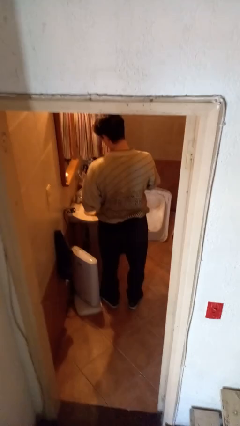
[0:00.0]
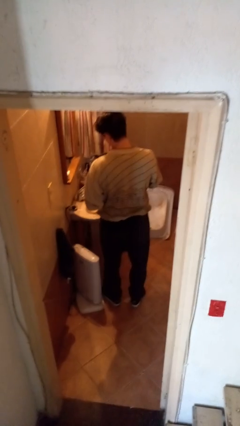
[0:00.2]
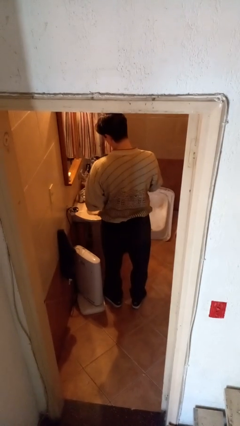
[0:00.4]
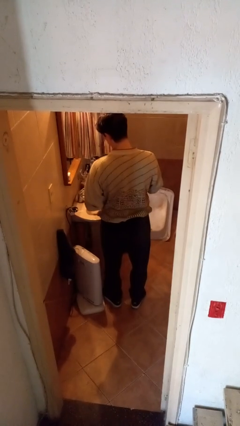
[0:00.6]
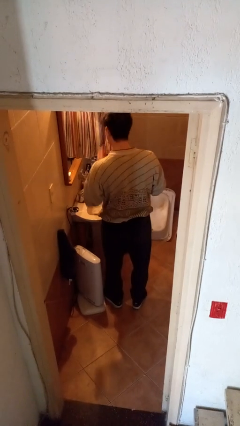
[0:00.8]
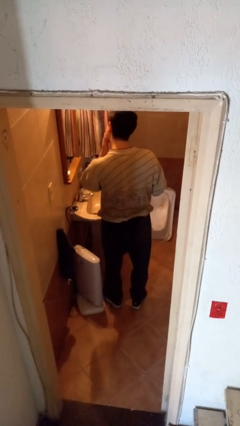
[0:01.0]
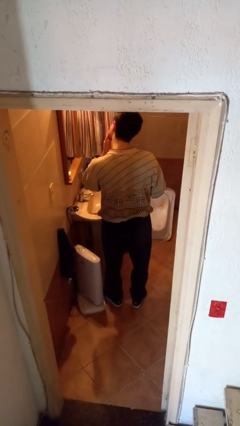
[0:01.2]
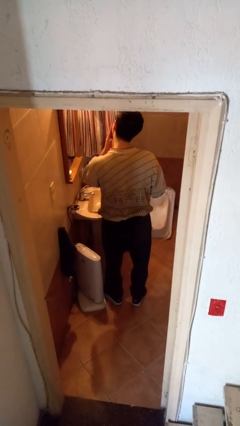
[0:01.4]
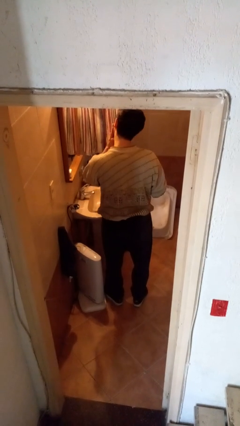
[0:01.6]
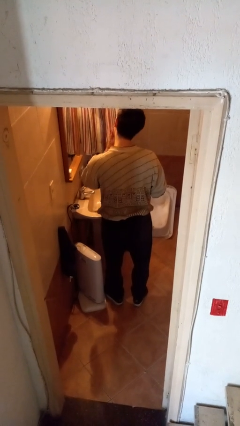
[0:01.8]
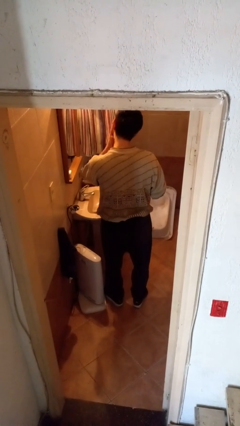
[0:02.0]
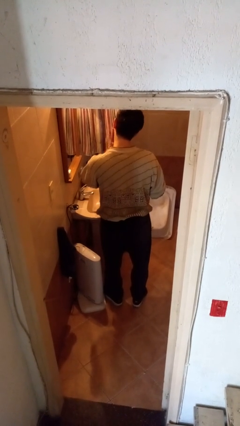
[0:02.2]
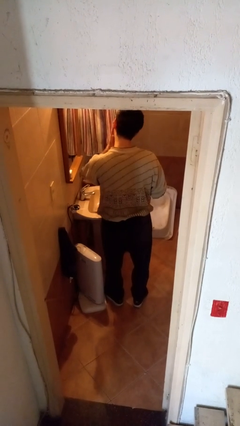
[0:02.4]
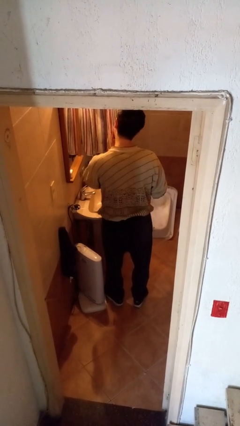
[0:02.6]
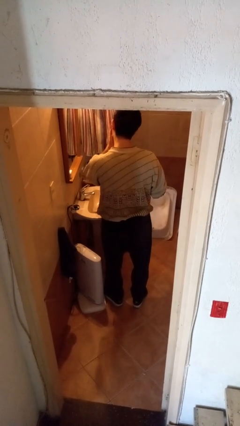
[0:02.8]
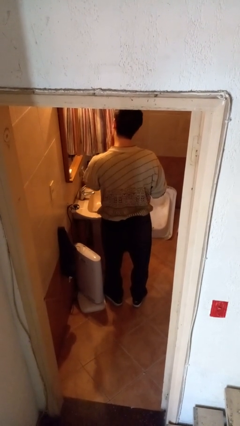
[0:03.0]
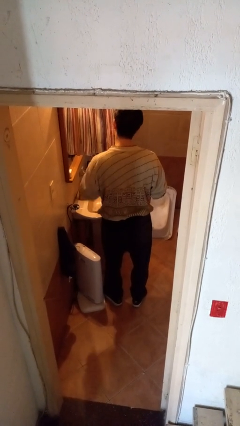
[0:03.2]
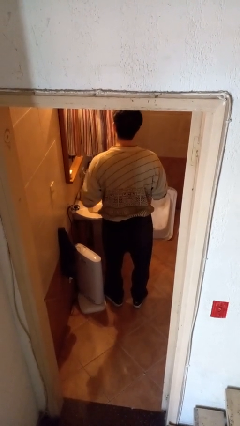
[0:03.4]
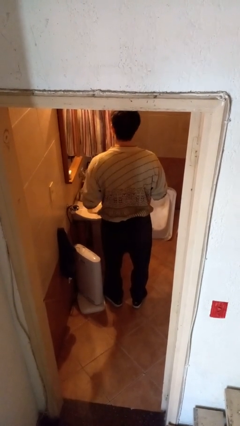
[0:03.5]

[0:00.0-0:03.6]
person applies facial moisturizer

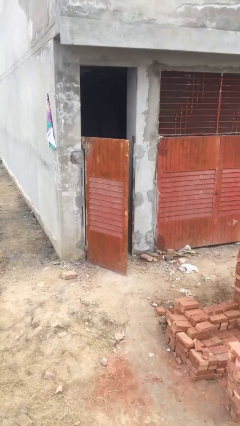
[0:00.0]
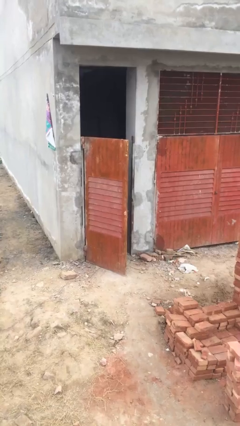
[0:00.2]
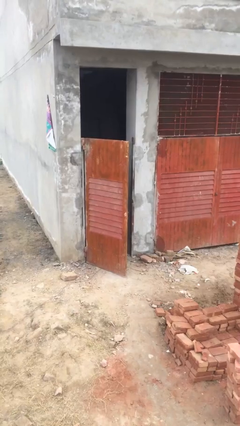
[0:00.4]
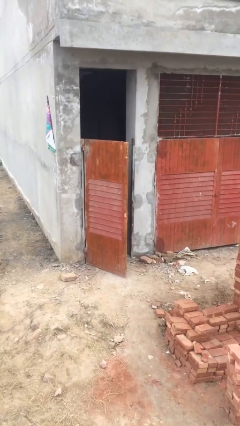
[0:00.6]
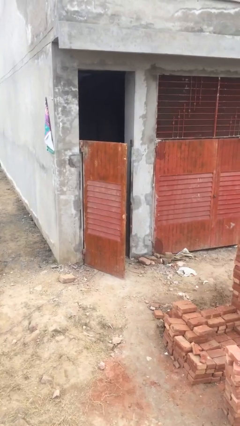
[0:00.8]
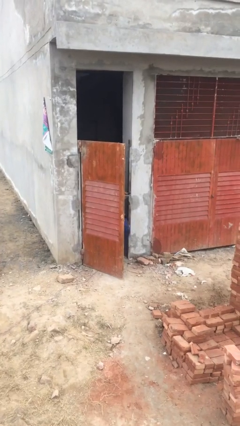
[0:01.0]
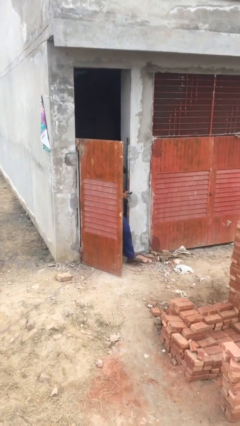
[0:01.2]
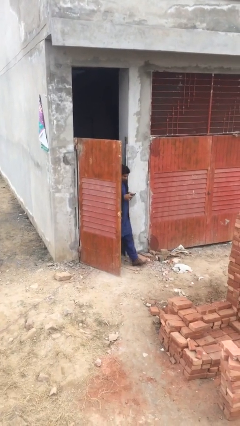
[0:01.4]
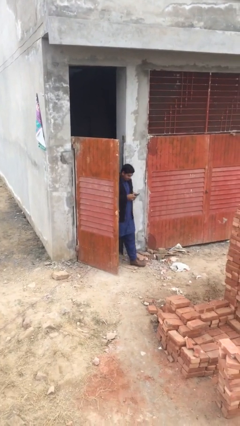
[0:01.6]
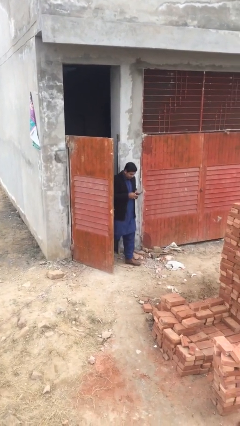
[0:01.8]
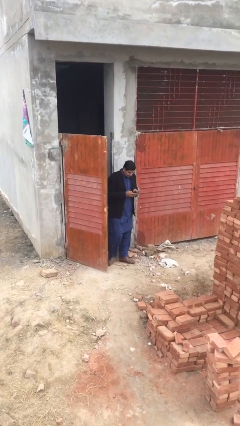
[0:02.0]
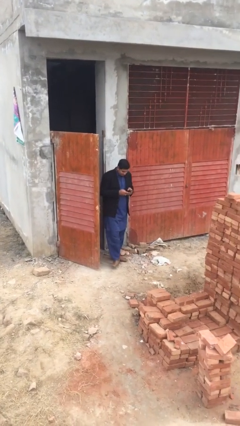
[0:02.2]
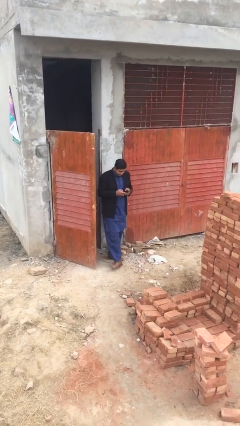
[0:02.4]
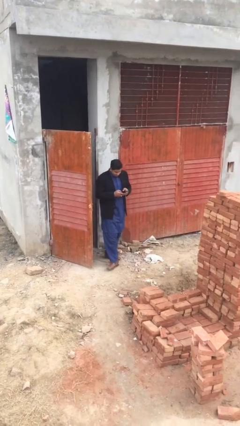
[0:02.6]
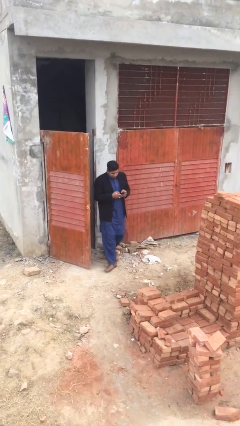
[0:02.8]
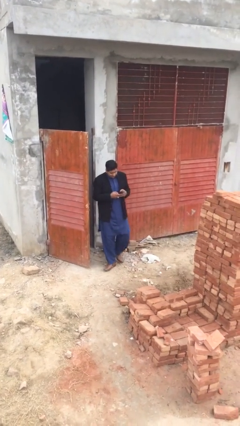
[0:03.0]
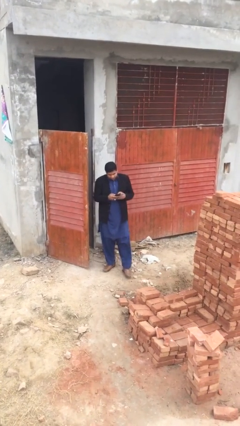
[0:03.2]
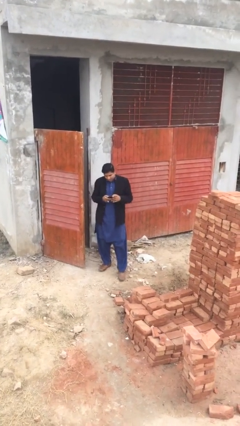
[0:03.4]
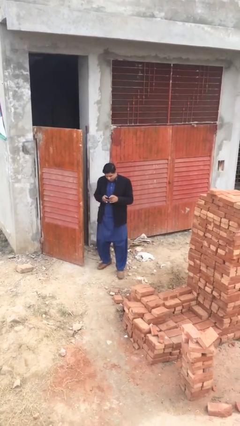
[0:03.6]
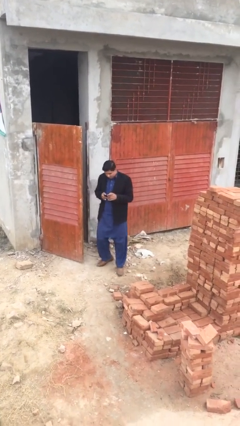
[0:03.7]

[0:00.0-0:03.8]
person enters scene through structure

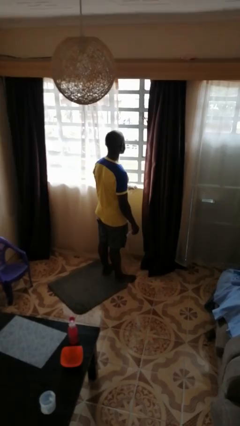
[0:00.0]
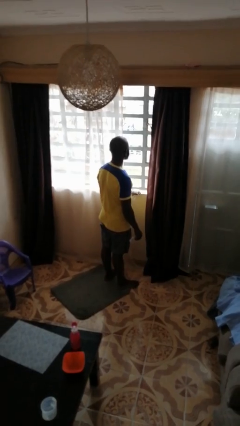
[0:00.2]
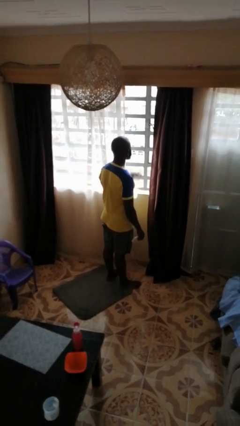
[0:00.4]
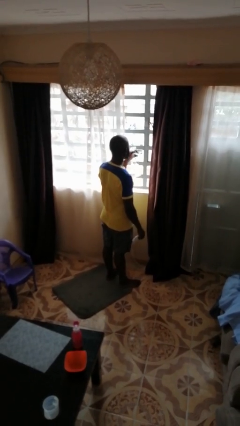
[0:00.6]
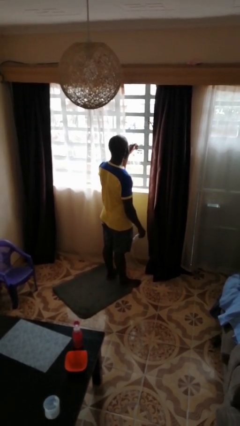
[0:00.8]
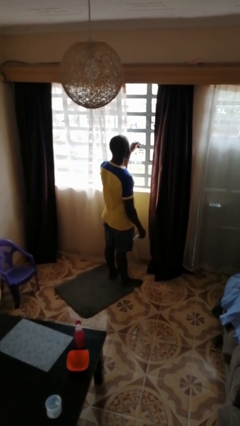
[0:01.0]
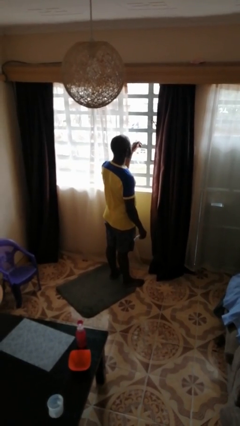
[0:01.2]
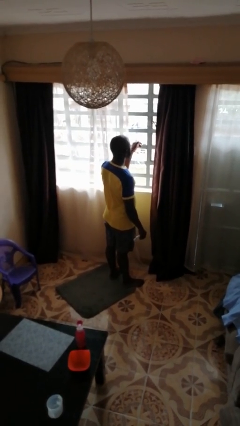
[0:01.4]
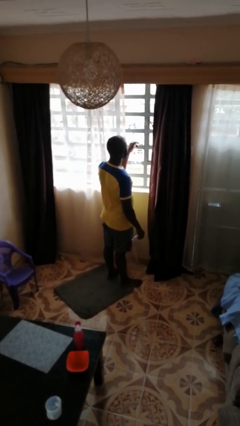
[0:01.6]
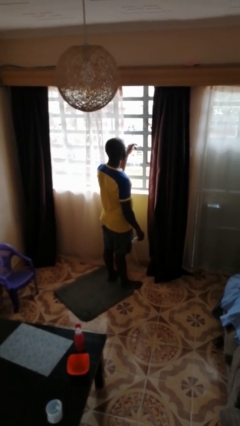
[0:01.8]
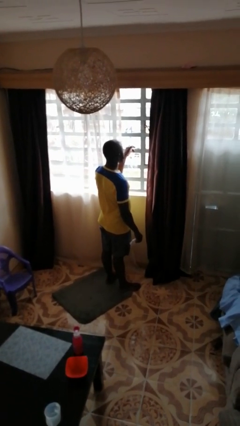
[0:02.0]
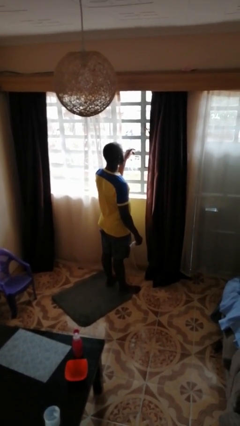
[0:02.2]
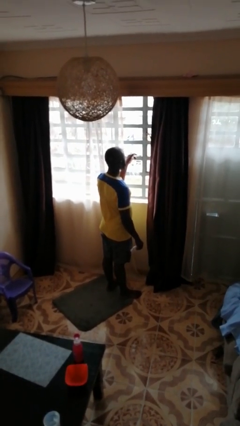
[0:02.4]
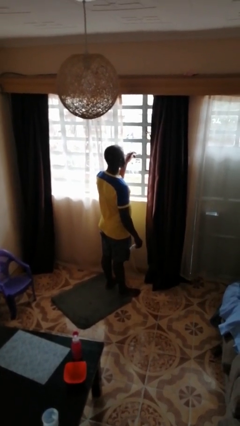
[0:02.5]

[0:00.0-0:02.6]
person sprays from bottle

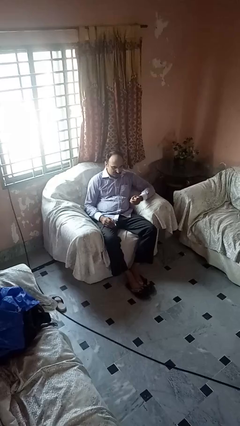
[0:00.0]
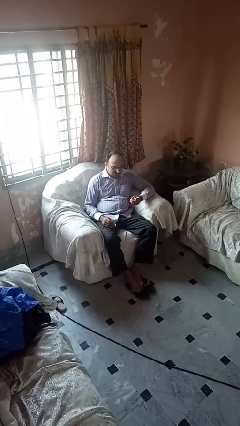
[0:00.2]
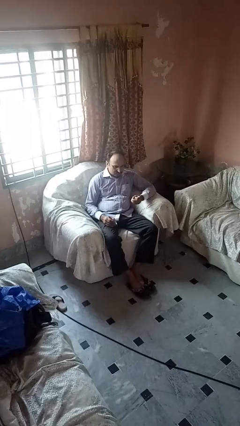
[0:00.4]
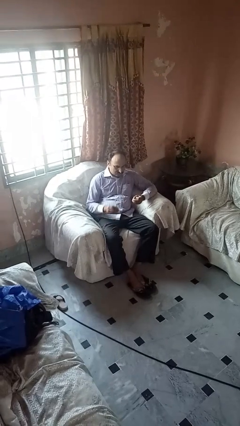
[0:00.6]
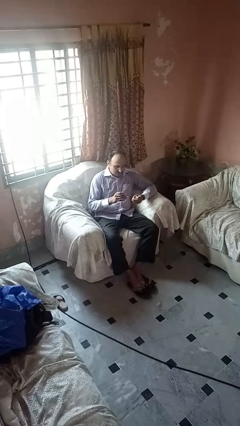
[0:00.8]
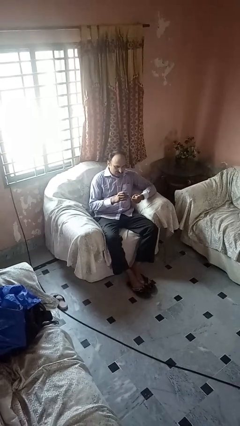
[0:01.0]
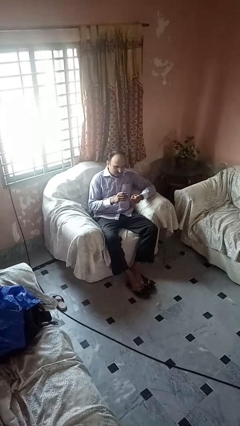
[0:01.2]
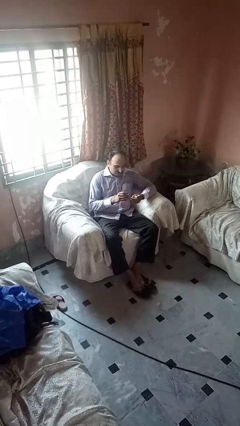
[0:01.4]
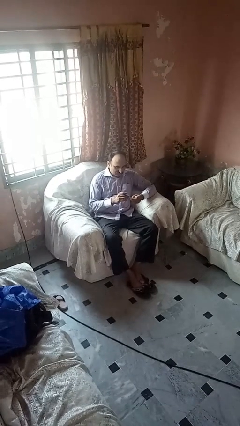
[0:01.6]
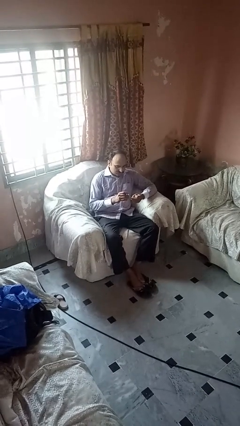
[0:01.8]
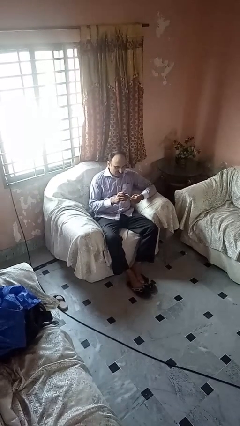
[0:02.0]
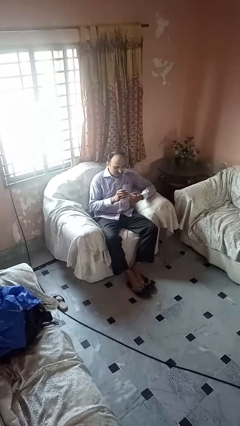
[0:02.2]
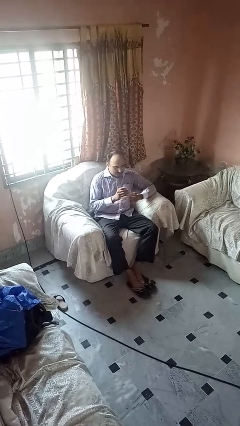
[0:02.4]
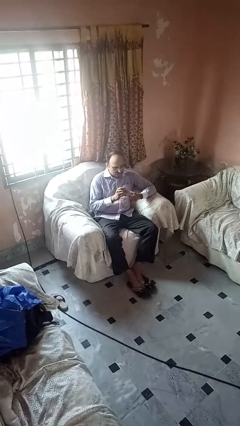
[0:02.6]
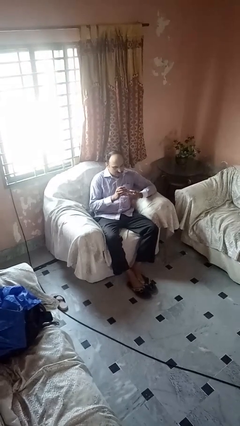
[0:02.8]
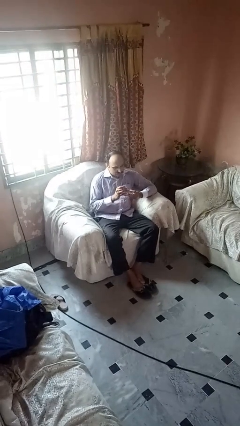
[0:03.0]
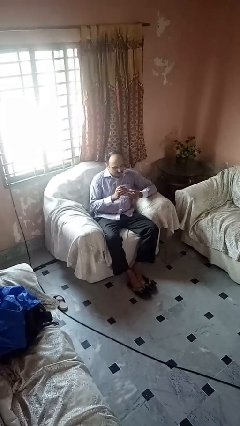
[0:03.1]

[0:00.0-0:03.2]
person clips fingernails

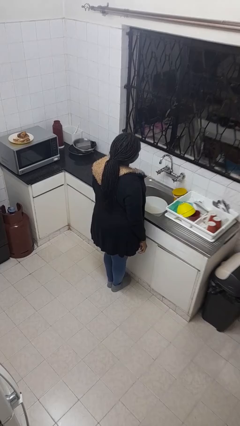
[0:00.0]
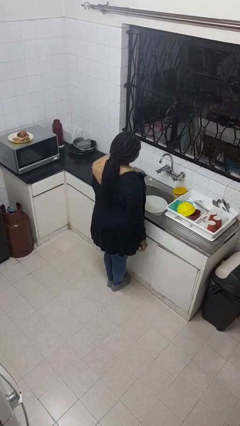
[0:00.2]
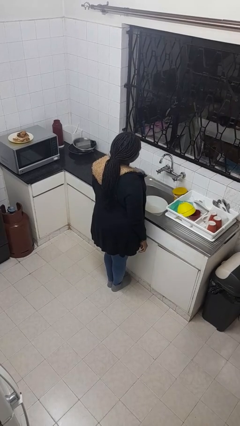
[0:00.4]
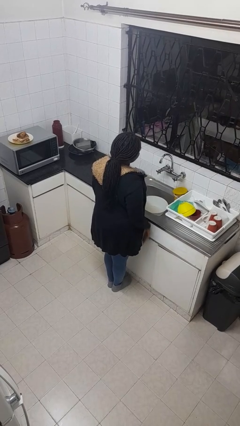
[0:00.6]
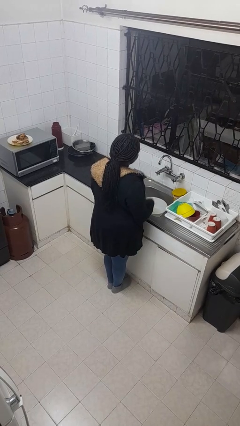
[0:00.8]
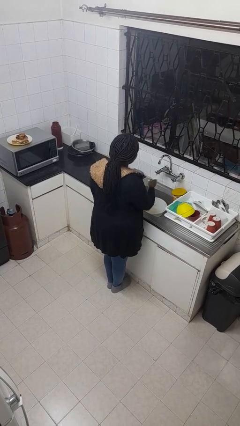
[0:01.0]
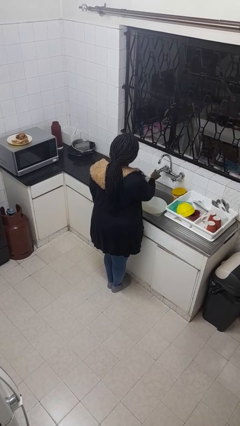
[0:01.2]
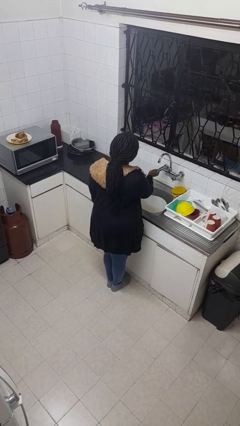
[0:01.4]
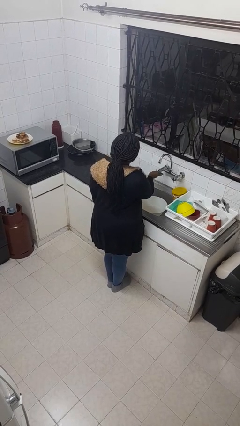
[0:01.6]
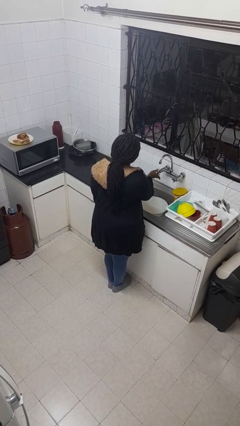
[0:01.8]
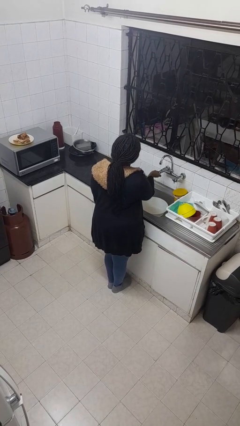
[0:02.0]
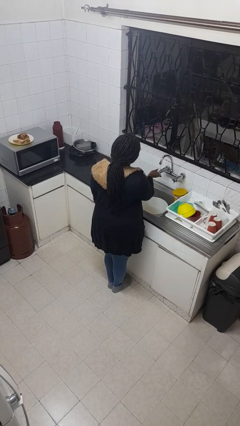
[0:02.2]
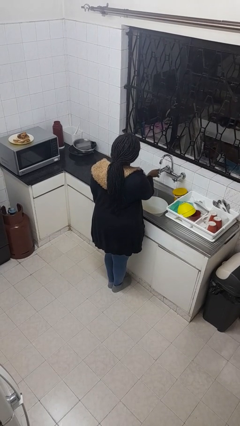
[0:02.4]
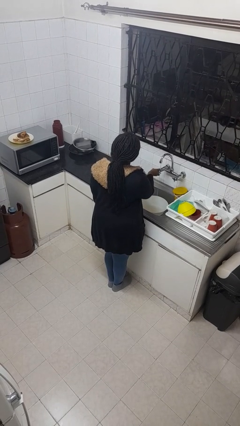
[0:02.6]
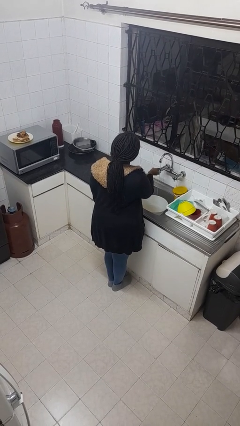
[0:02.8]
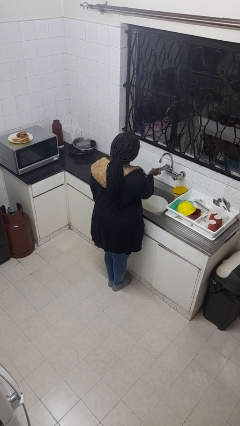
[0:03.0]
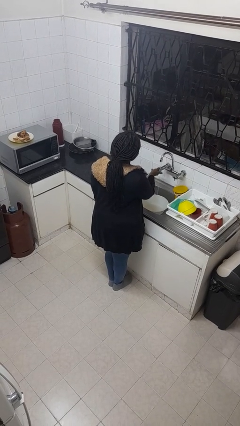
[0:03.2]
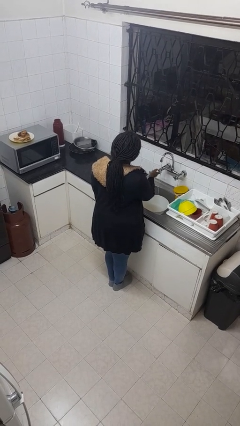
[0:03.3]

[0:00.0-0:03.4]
person turns on faucet

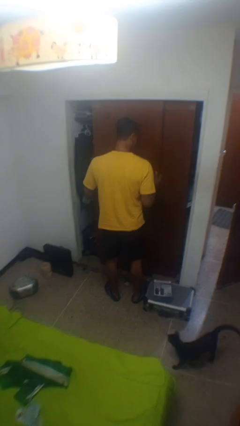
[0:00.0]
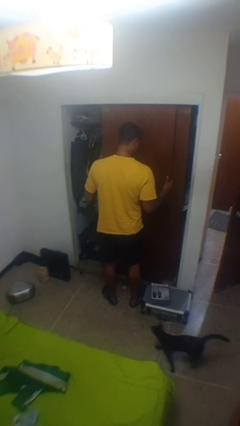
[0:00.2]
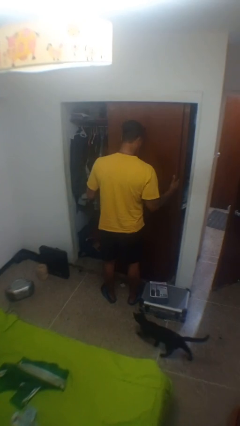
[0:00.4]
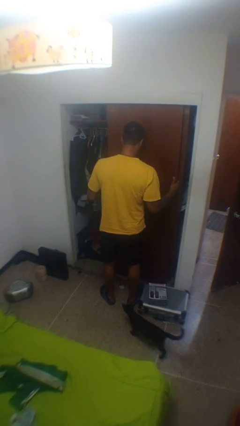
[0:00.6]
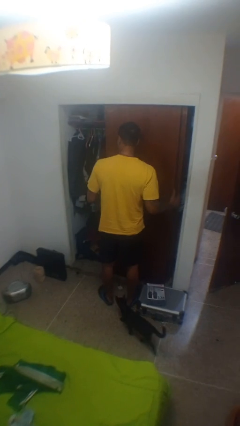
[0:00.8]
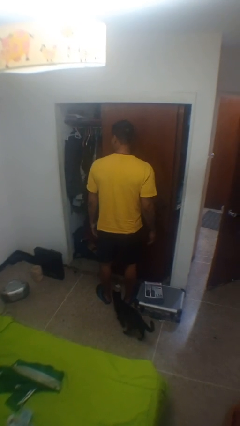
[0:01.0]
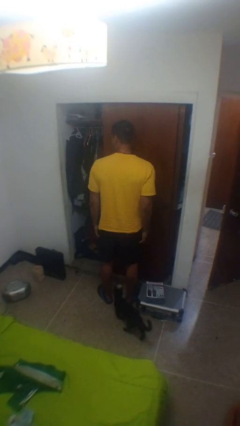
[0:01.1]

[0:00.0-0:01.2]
person opens closet door

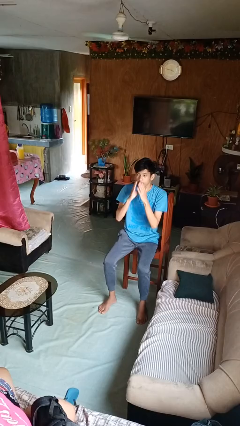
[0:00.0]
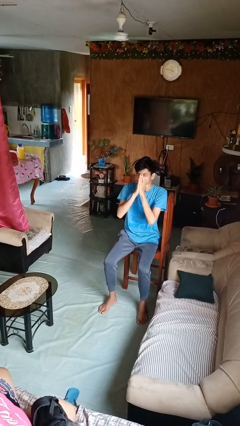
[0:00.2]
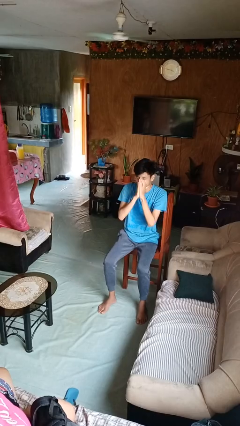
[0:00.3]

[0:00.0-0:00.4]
person sneezes into hand
